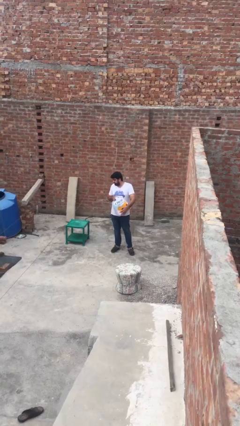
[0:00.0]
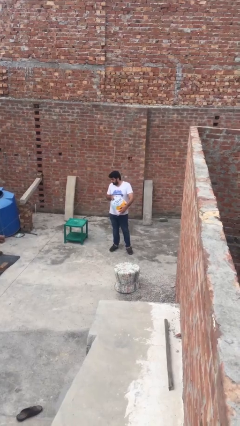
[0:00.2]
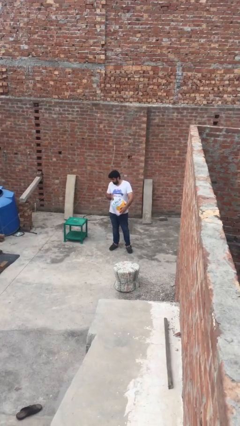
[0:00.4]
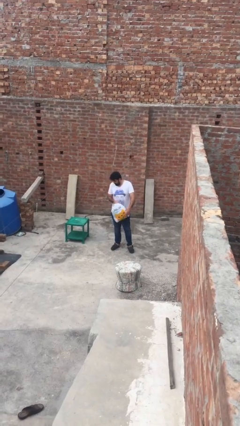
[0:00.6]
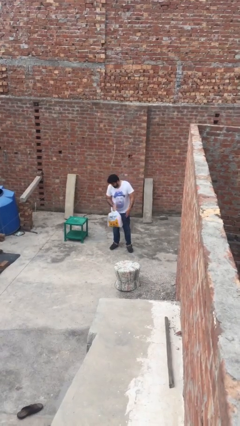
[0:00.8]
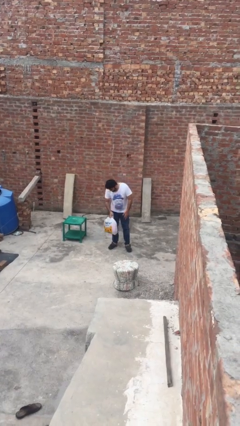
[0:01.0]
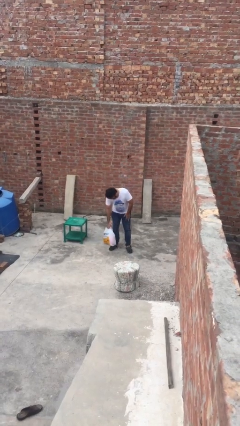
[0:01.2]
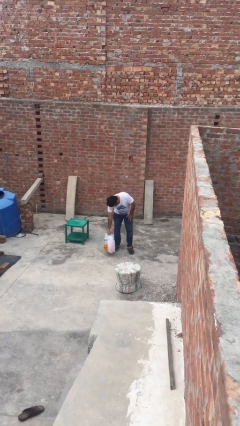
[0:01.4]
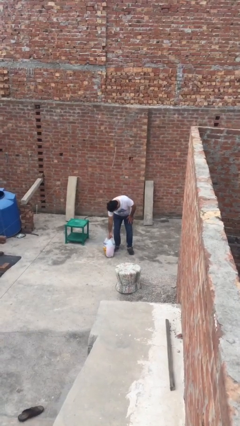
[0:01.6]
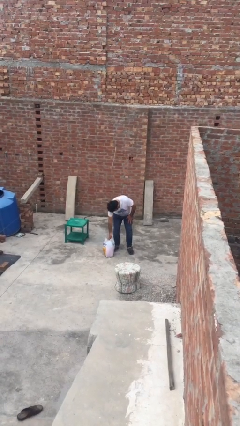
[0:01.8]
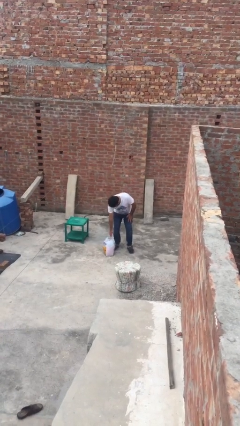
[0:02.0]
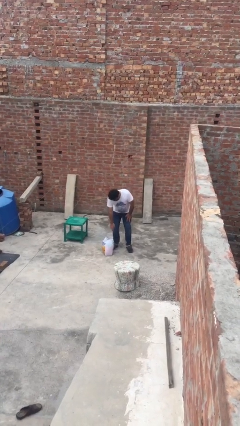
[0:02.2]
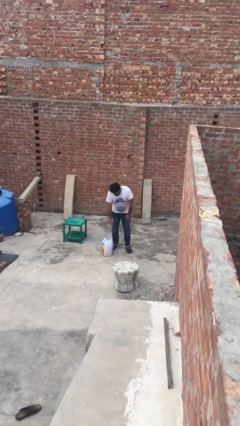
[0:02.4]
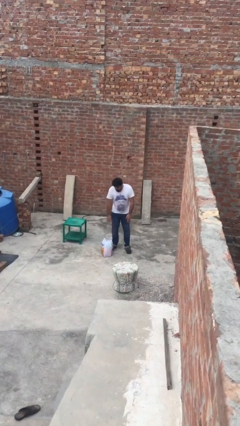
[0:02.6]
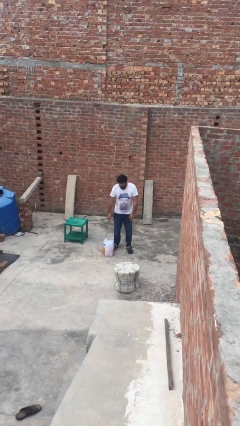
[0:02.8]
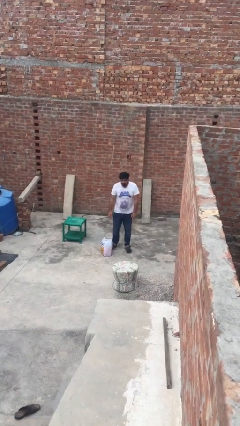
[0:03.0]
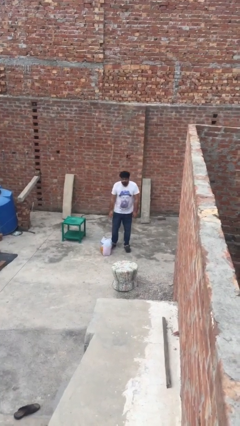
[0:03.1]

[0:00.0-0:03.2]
person puts down object on floor

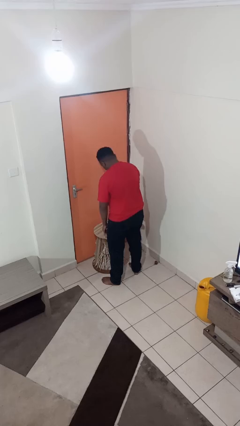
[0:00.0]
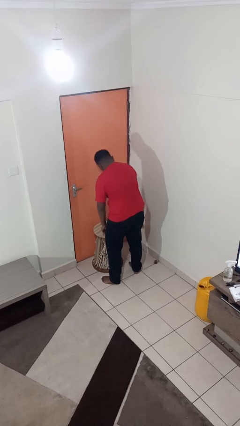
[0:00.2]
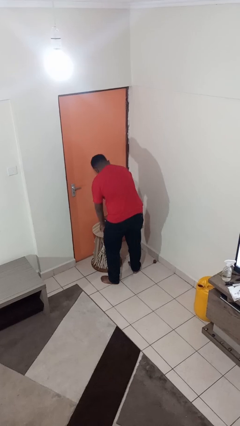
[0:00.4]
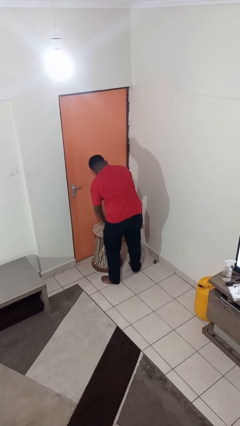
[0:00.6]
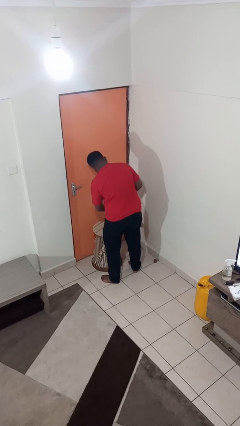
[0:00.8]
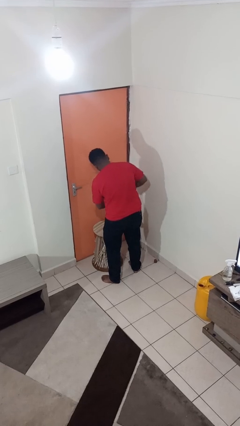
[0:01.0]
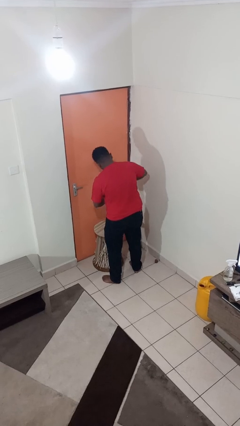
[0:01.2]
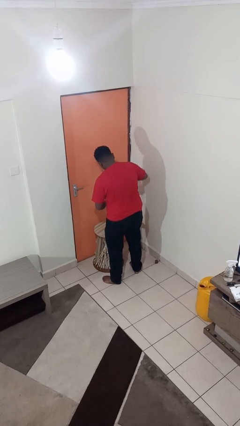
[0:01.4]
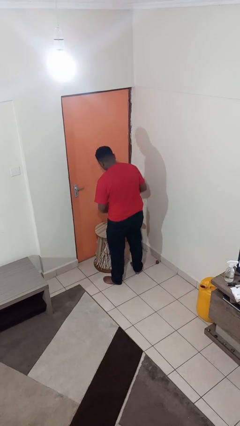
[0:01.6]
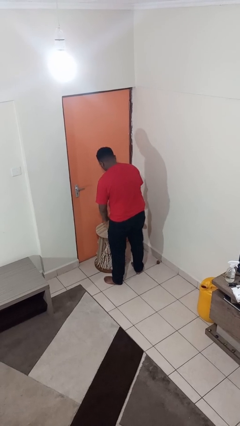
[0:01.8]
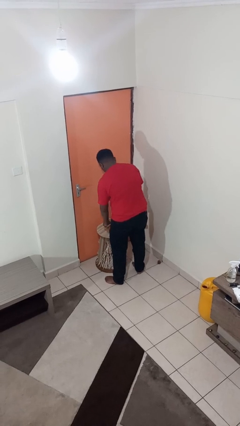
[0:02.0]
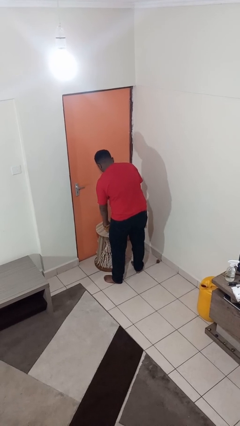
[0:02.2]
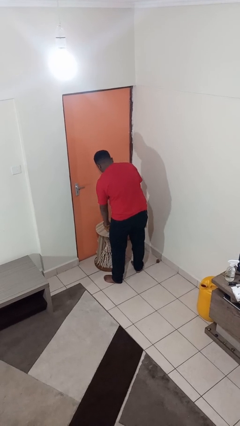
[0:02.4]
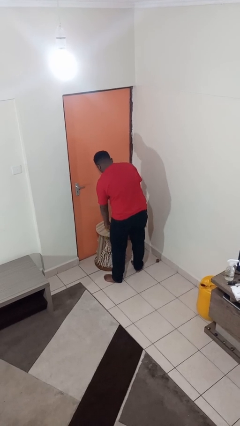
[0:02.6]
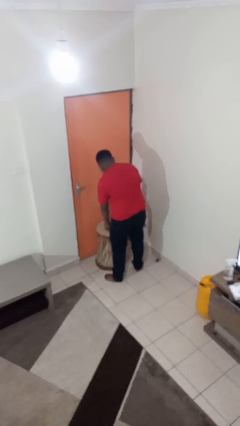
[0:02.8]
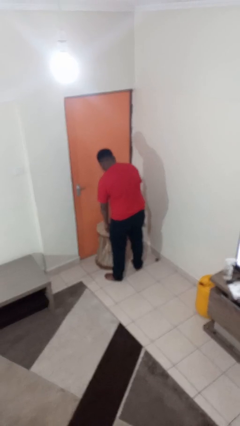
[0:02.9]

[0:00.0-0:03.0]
person opens jar

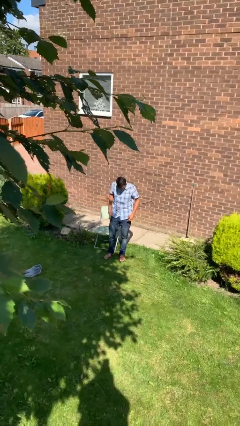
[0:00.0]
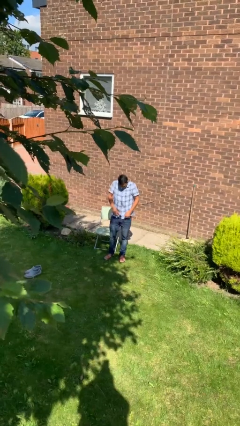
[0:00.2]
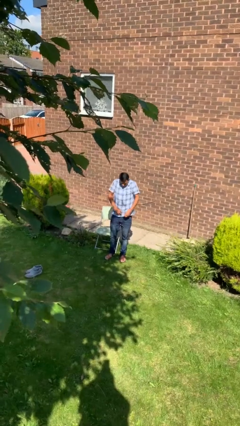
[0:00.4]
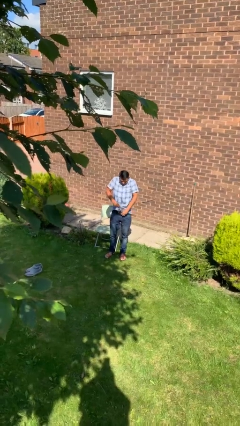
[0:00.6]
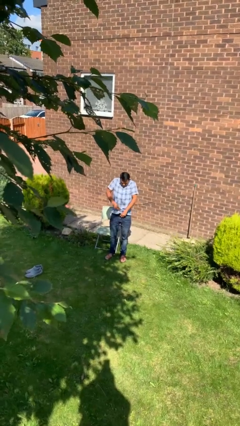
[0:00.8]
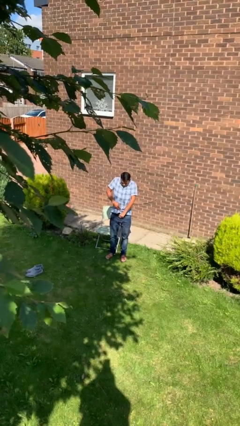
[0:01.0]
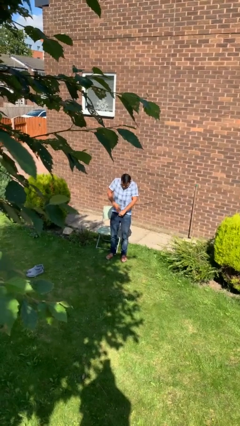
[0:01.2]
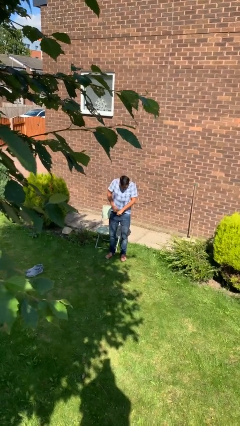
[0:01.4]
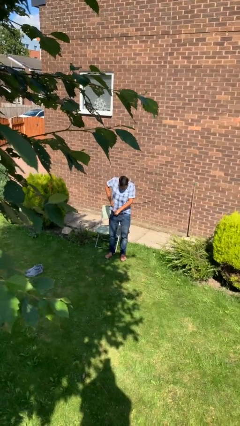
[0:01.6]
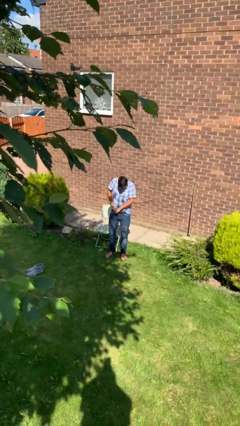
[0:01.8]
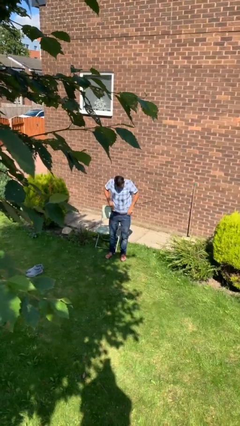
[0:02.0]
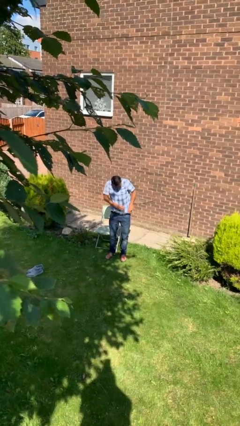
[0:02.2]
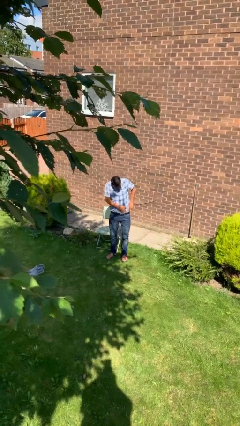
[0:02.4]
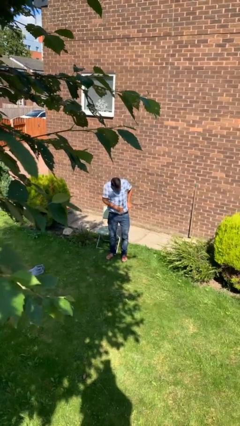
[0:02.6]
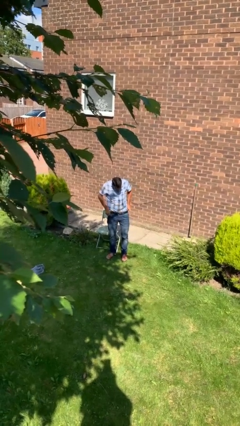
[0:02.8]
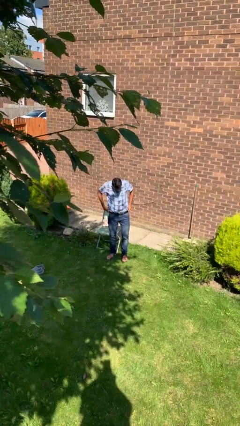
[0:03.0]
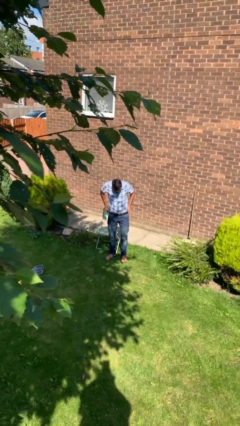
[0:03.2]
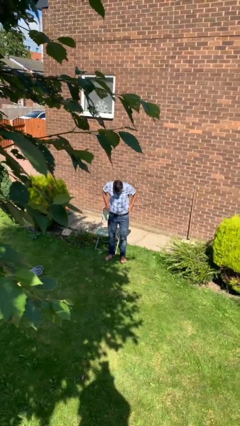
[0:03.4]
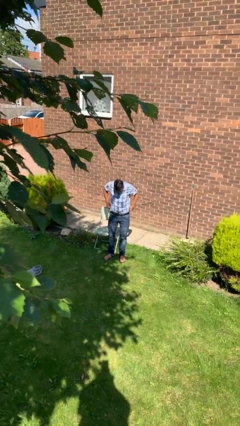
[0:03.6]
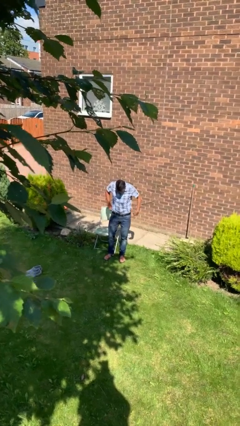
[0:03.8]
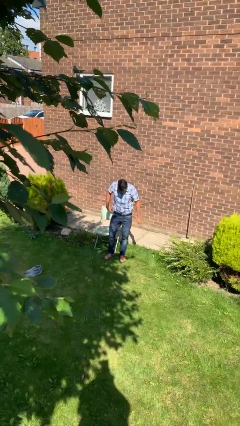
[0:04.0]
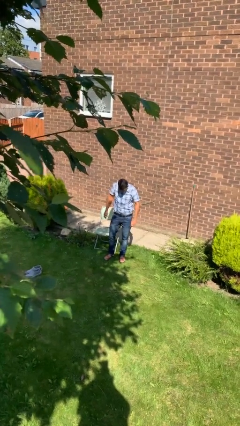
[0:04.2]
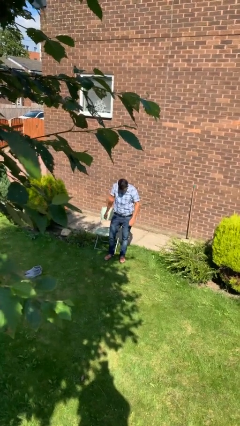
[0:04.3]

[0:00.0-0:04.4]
person tucks in shirt

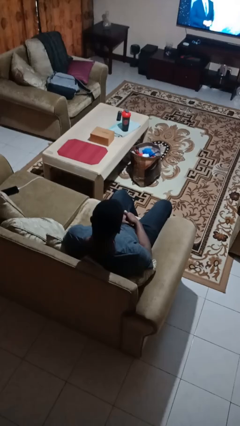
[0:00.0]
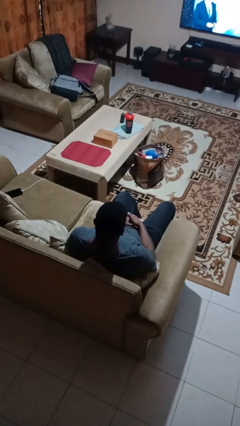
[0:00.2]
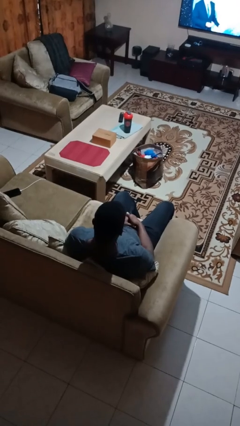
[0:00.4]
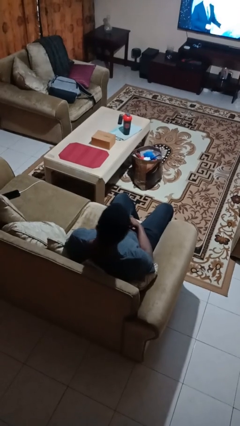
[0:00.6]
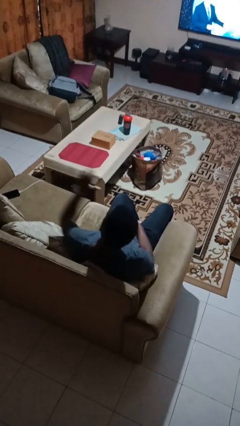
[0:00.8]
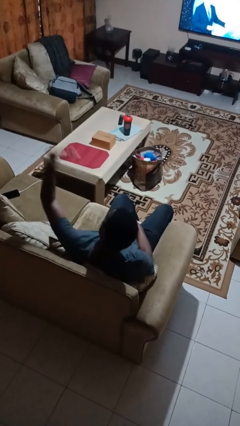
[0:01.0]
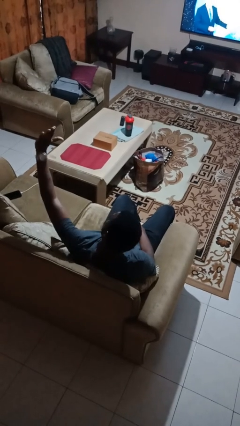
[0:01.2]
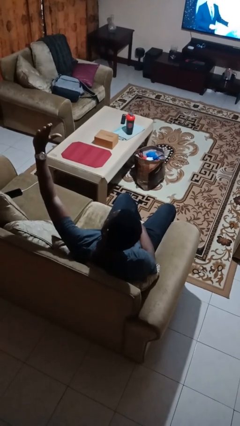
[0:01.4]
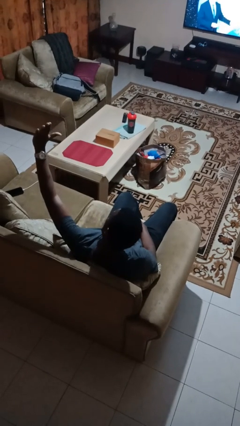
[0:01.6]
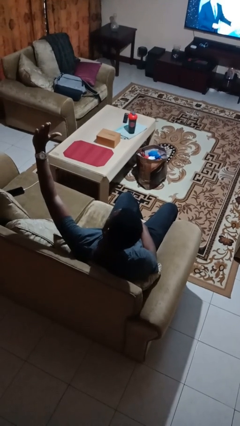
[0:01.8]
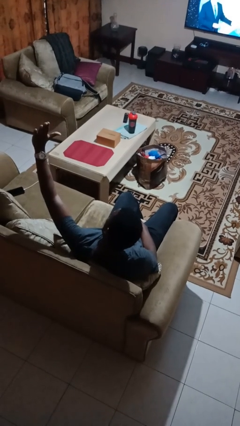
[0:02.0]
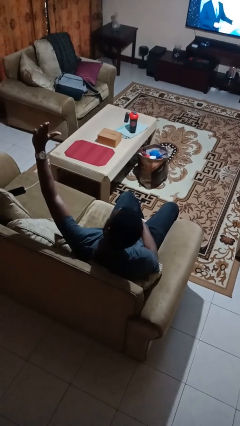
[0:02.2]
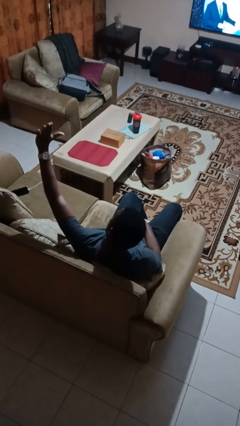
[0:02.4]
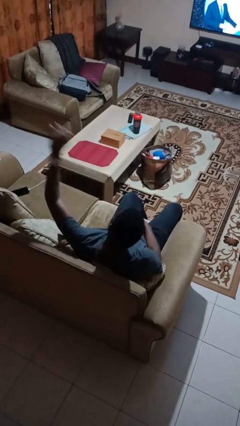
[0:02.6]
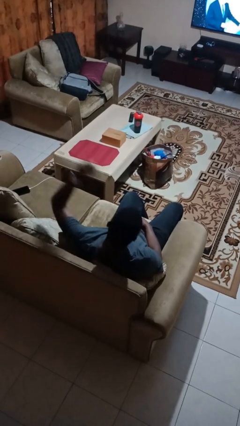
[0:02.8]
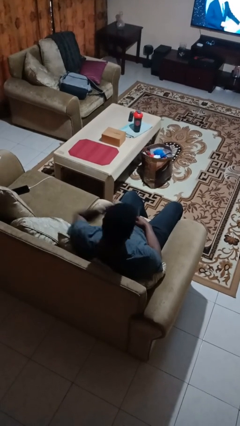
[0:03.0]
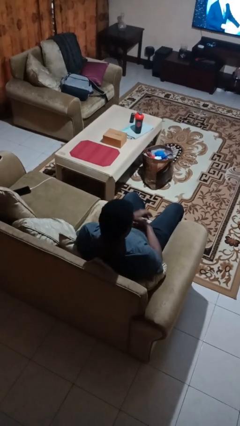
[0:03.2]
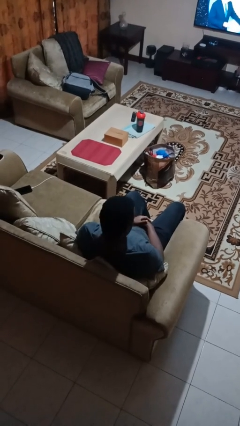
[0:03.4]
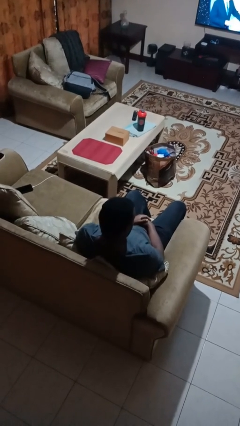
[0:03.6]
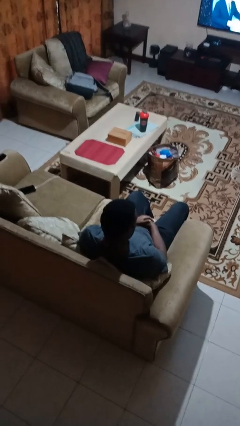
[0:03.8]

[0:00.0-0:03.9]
person gestures stop

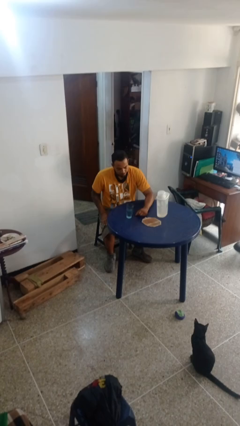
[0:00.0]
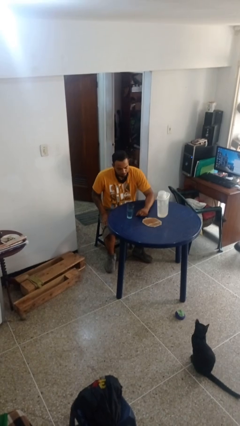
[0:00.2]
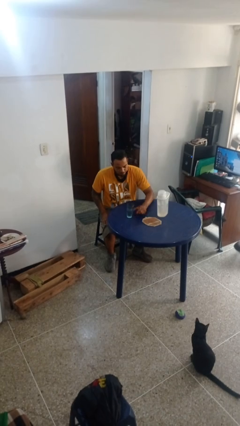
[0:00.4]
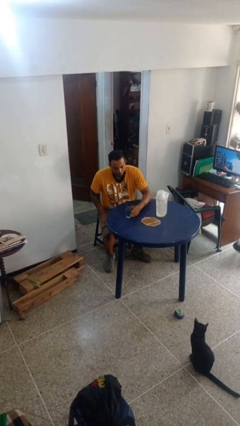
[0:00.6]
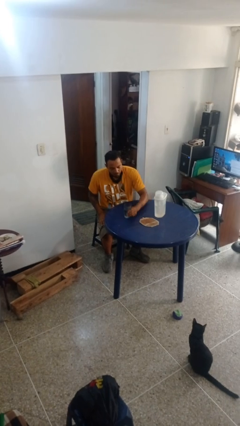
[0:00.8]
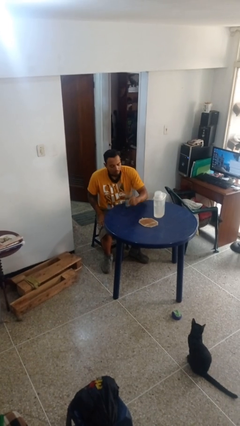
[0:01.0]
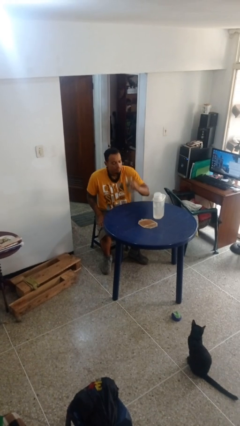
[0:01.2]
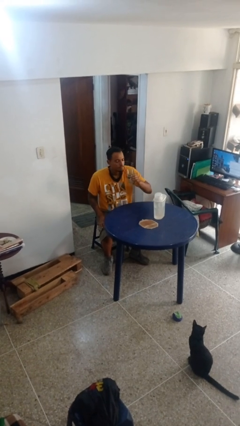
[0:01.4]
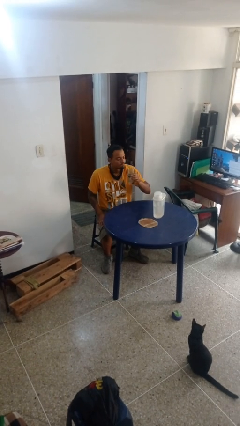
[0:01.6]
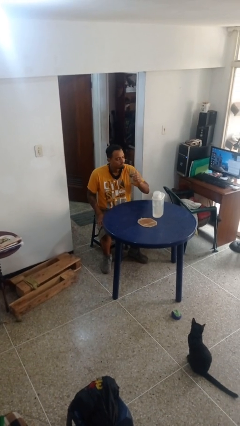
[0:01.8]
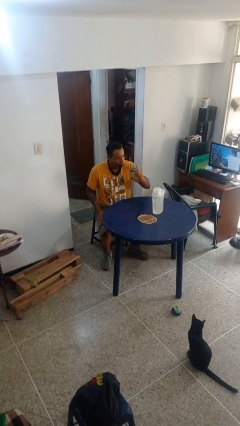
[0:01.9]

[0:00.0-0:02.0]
person picks up object from table

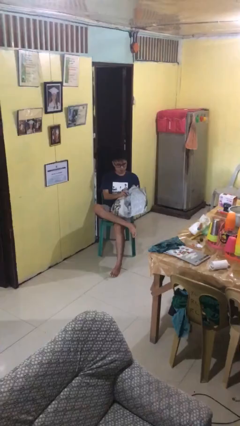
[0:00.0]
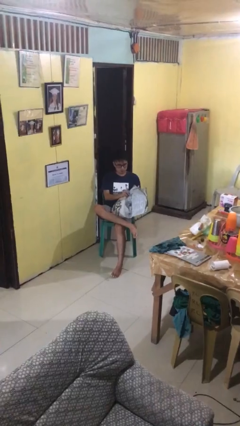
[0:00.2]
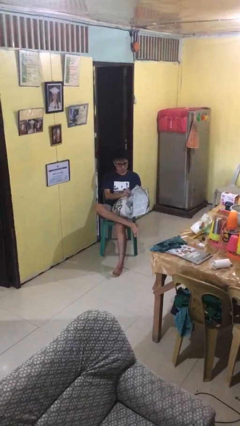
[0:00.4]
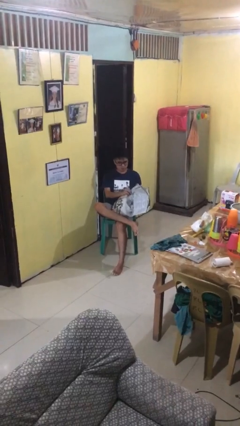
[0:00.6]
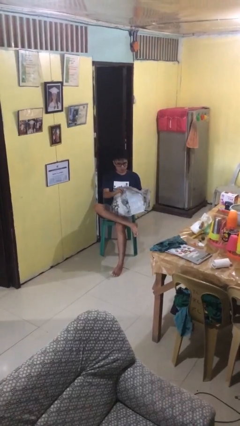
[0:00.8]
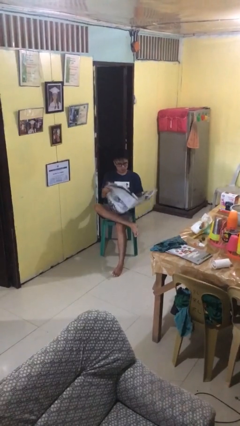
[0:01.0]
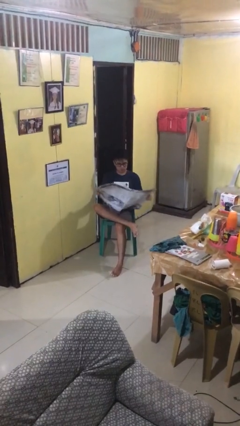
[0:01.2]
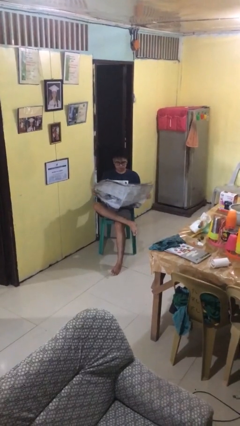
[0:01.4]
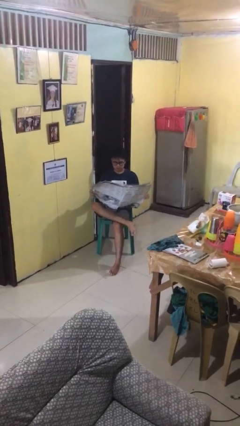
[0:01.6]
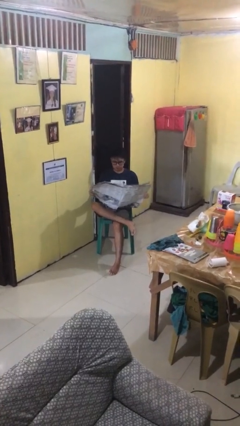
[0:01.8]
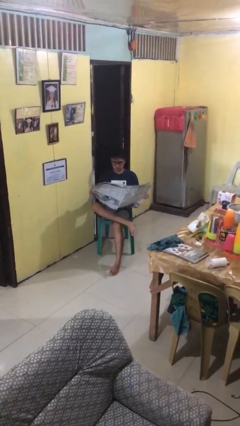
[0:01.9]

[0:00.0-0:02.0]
person reads newspaper
